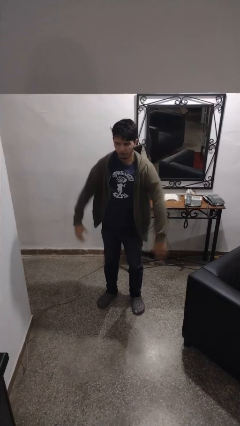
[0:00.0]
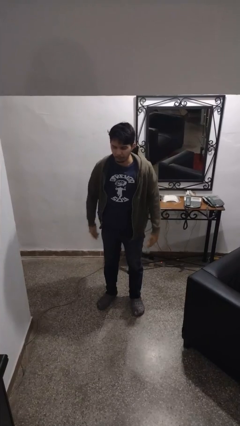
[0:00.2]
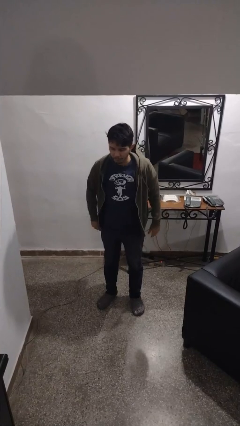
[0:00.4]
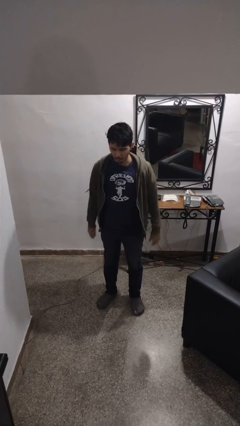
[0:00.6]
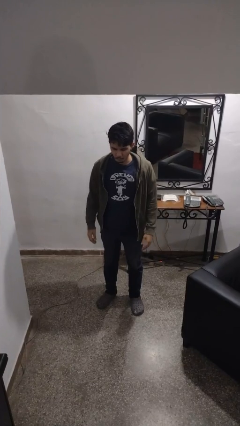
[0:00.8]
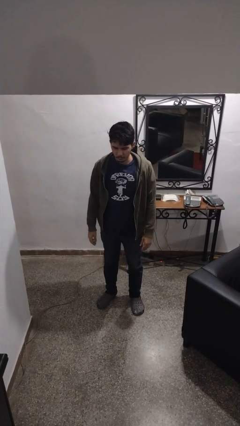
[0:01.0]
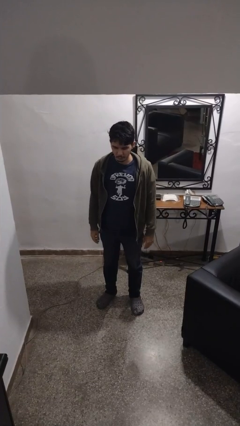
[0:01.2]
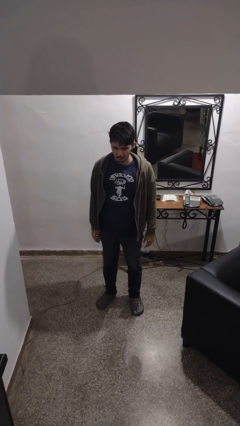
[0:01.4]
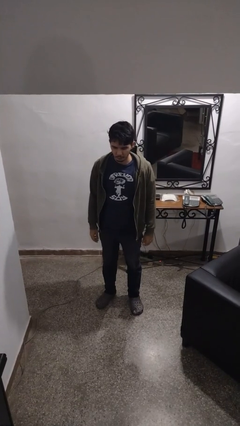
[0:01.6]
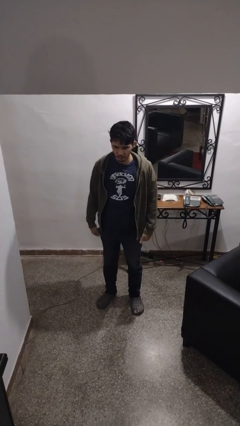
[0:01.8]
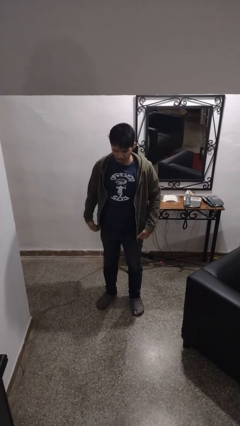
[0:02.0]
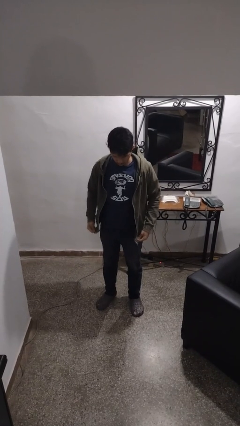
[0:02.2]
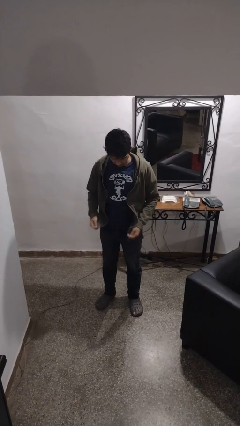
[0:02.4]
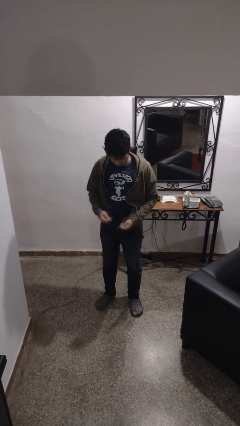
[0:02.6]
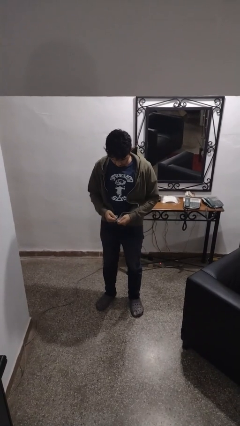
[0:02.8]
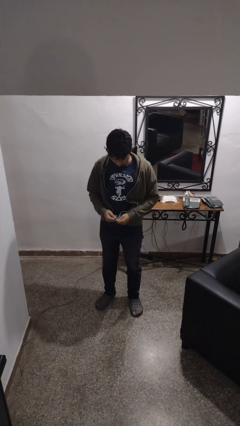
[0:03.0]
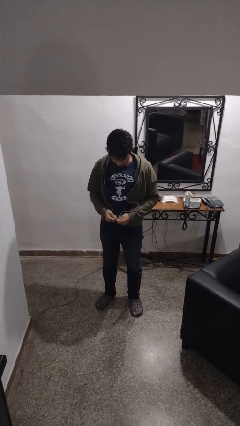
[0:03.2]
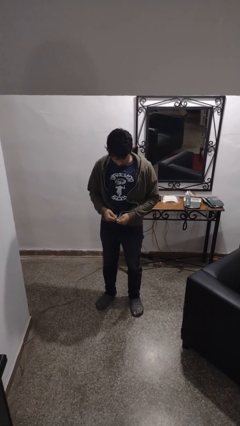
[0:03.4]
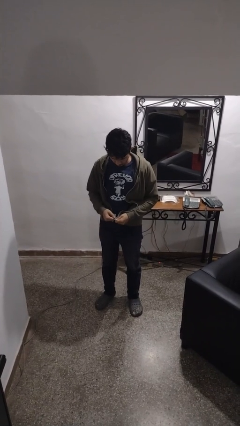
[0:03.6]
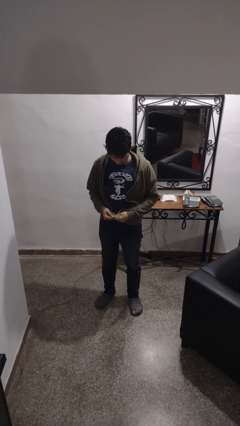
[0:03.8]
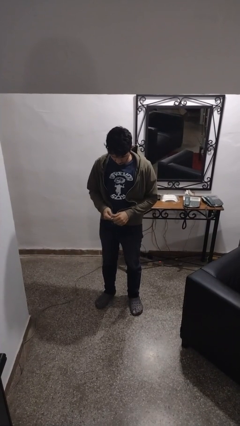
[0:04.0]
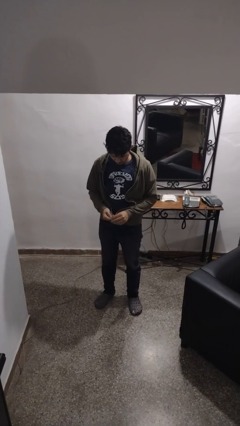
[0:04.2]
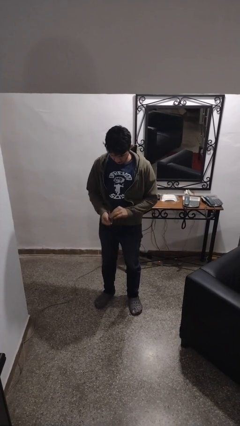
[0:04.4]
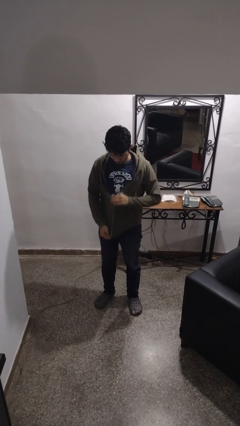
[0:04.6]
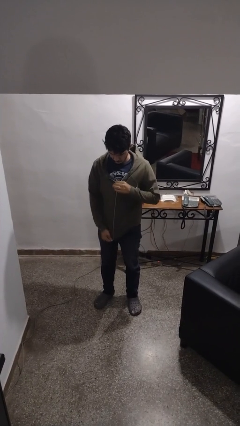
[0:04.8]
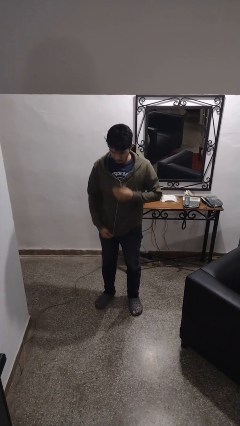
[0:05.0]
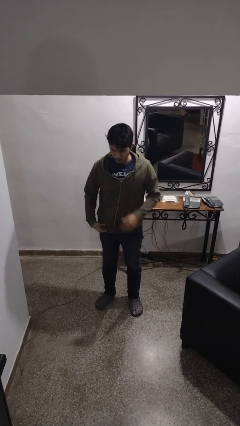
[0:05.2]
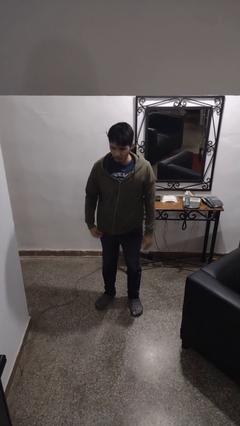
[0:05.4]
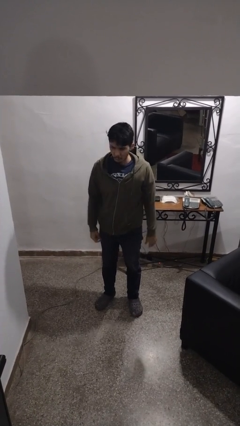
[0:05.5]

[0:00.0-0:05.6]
person zips up jacket

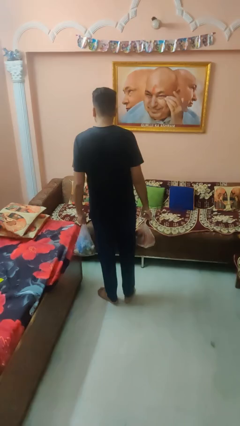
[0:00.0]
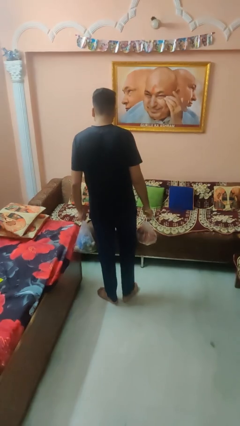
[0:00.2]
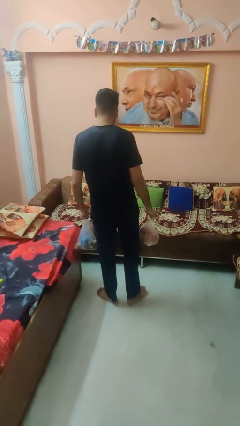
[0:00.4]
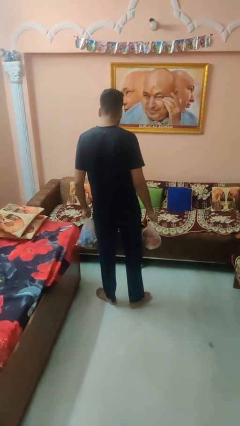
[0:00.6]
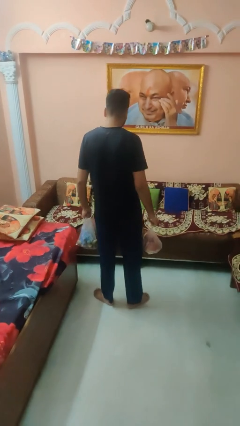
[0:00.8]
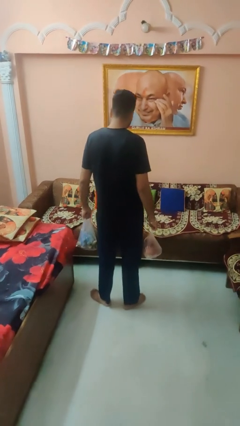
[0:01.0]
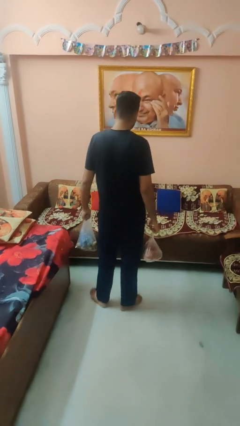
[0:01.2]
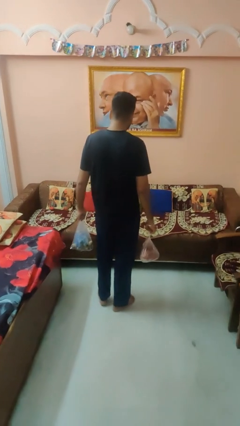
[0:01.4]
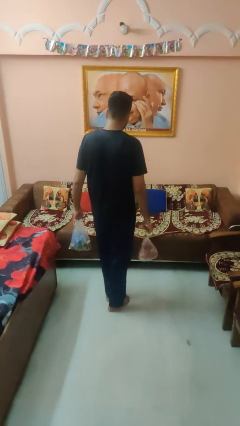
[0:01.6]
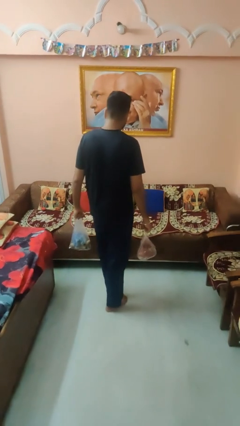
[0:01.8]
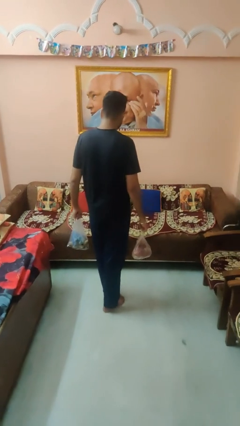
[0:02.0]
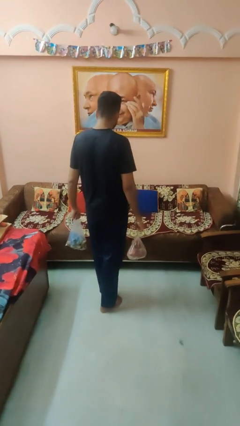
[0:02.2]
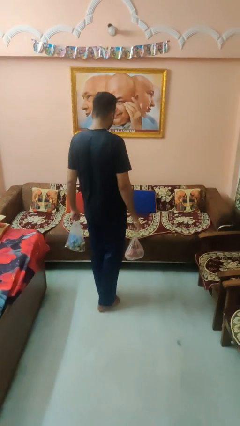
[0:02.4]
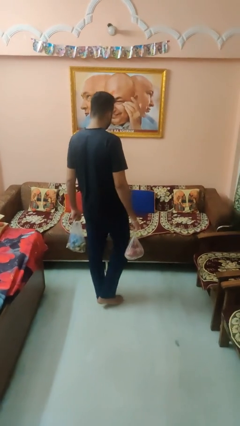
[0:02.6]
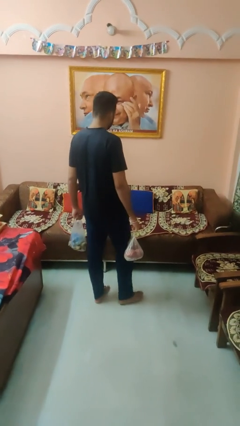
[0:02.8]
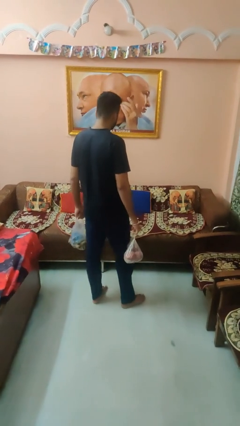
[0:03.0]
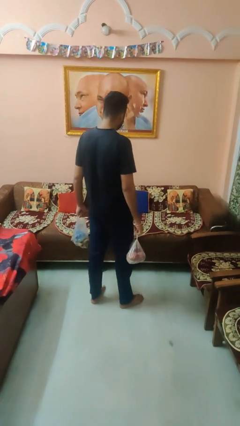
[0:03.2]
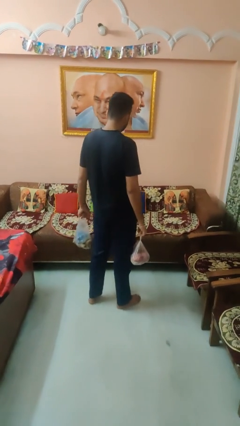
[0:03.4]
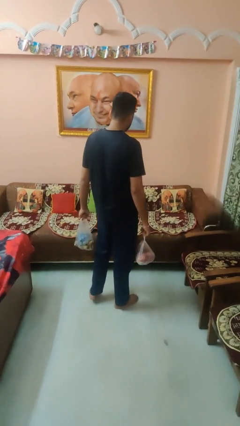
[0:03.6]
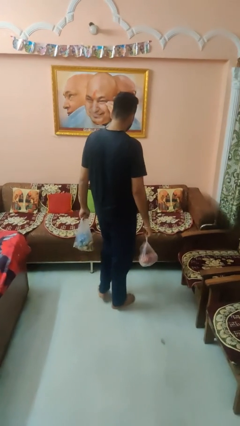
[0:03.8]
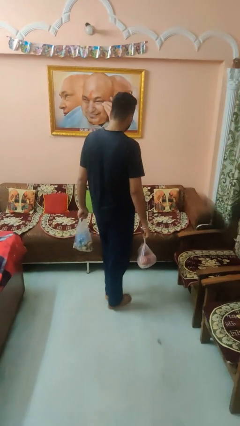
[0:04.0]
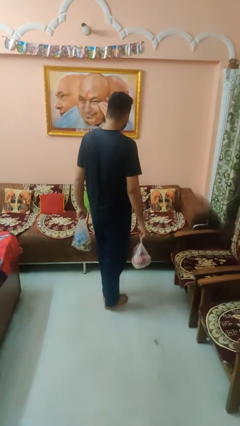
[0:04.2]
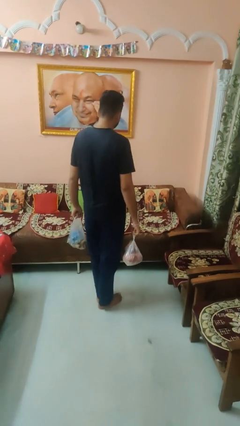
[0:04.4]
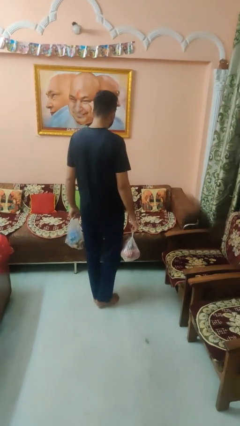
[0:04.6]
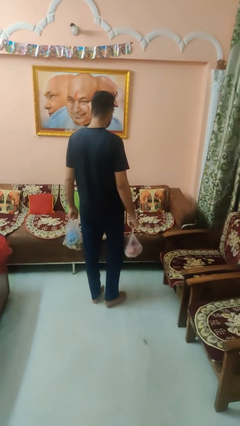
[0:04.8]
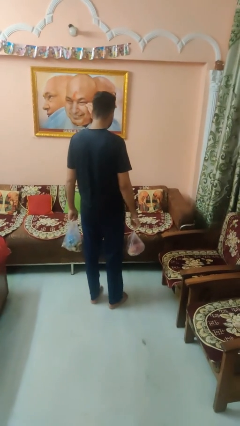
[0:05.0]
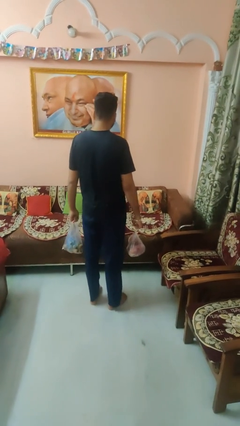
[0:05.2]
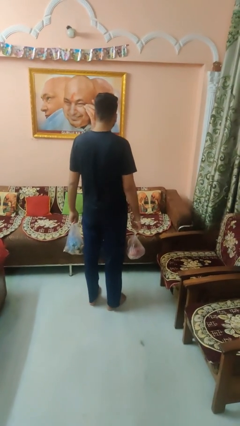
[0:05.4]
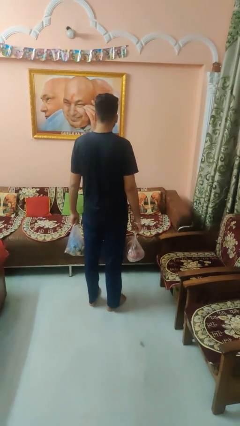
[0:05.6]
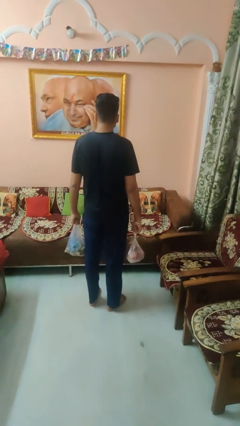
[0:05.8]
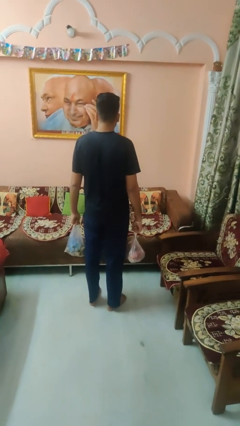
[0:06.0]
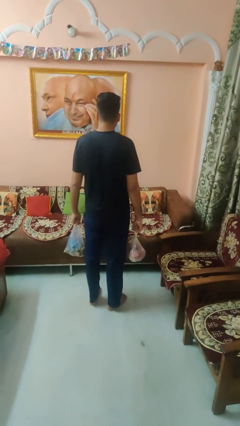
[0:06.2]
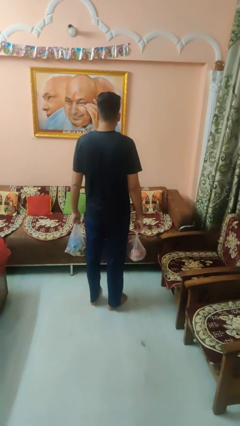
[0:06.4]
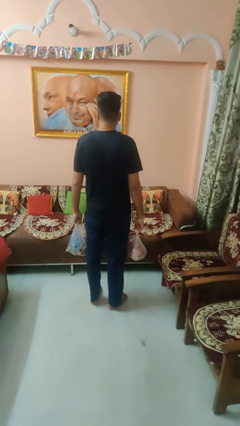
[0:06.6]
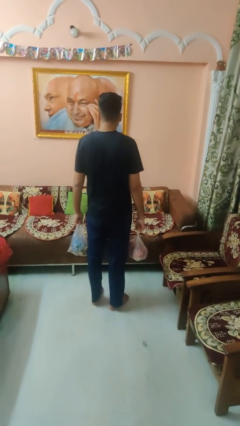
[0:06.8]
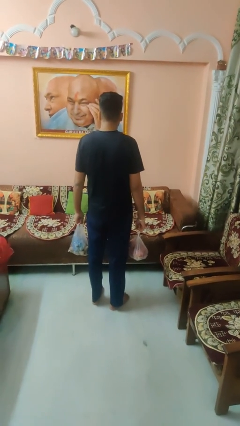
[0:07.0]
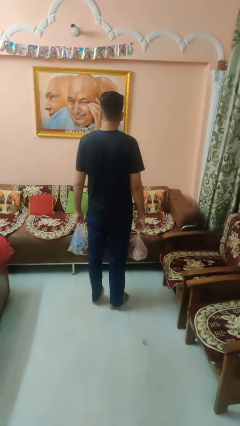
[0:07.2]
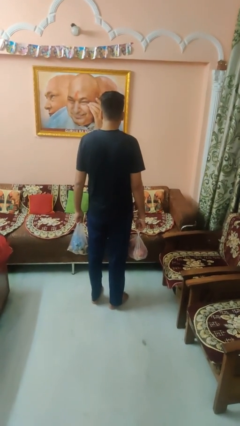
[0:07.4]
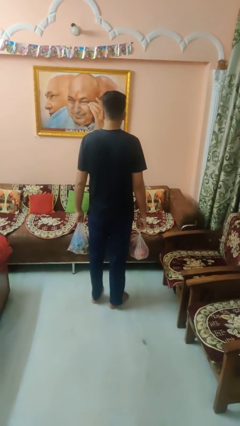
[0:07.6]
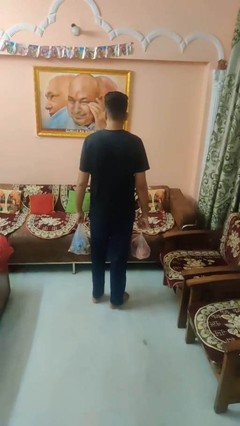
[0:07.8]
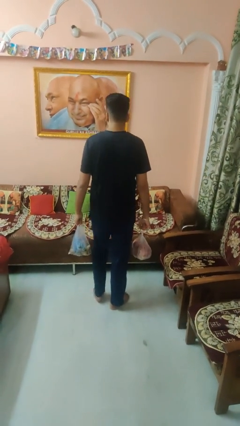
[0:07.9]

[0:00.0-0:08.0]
person carries groceries

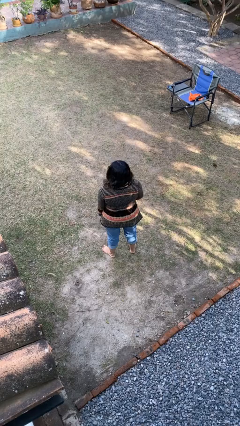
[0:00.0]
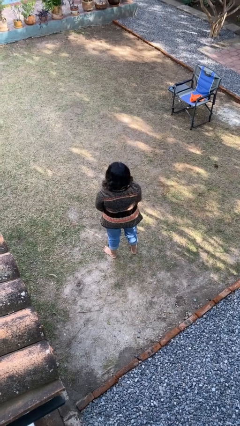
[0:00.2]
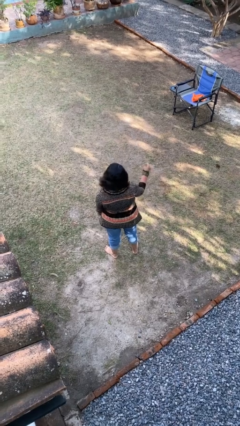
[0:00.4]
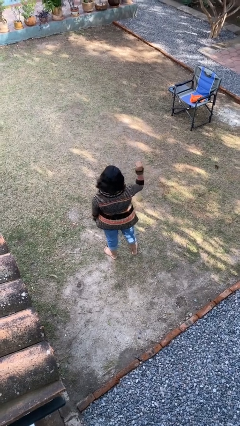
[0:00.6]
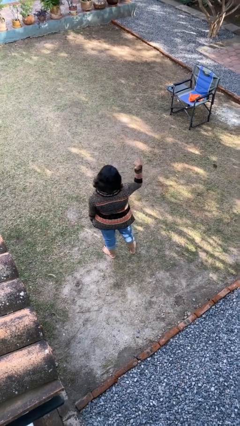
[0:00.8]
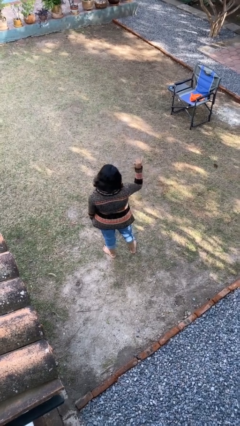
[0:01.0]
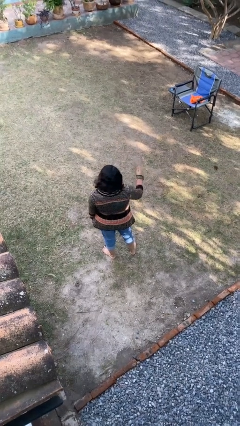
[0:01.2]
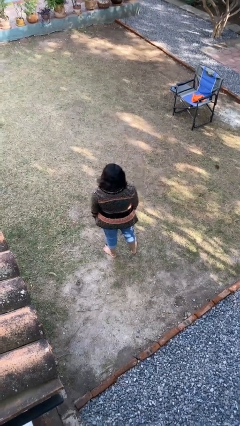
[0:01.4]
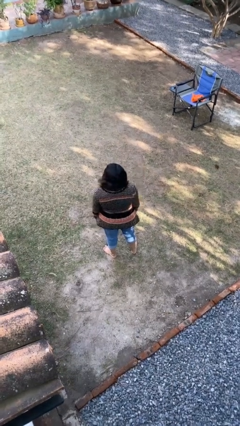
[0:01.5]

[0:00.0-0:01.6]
person gestures hang loose

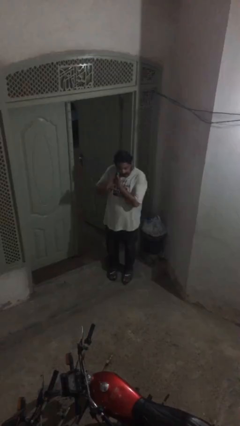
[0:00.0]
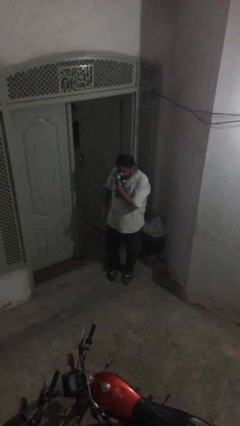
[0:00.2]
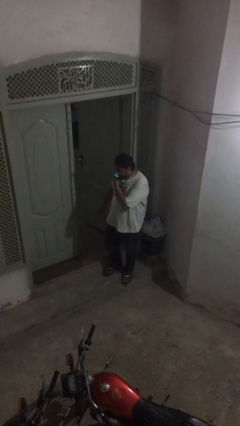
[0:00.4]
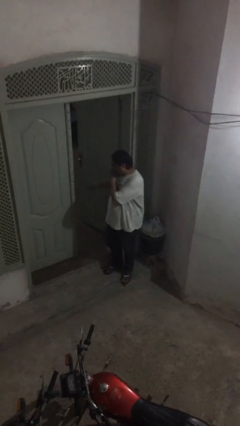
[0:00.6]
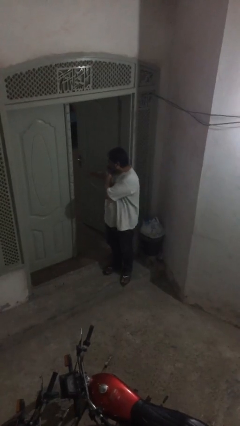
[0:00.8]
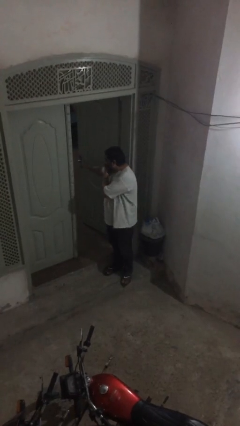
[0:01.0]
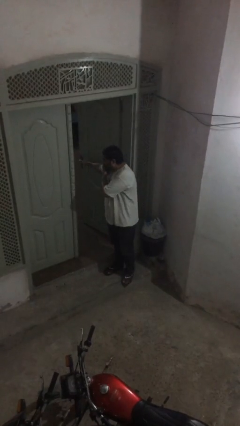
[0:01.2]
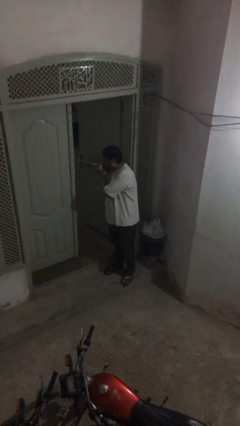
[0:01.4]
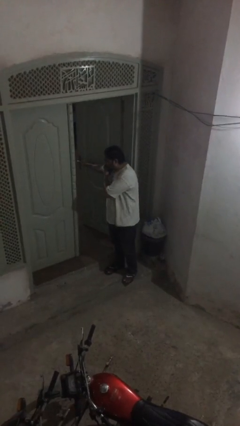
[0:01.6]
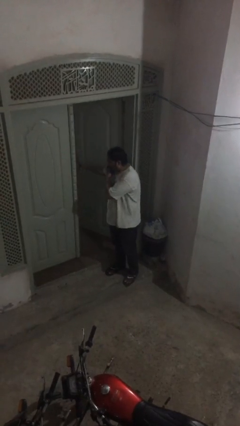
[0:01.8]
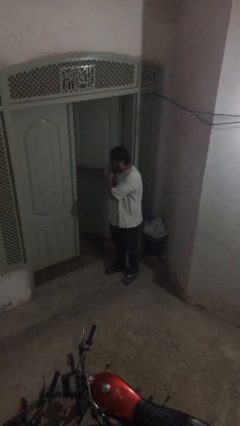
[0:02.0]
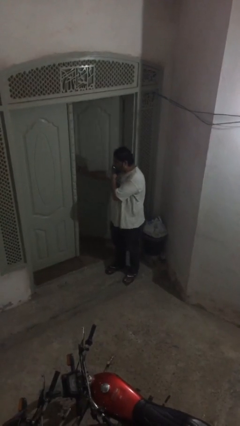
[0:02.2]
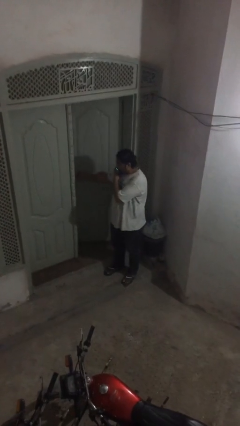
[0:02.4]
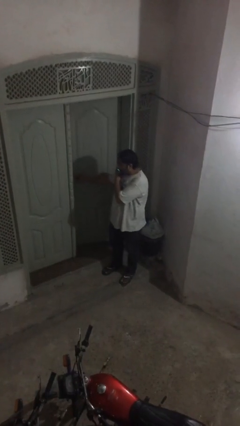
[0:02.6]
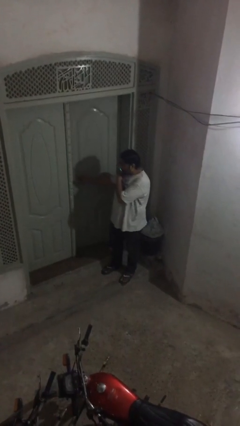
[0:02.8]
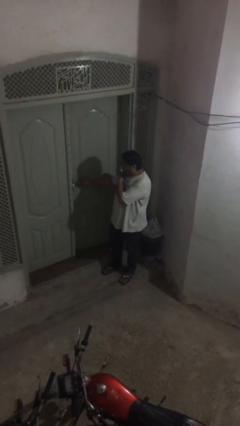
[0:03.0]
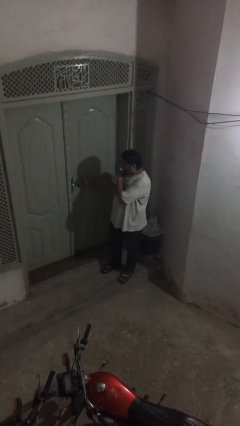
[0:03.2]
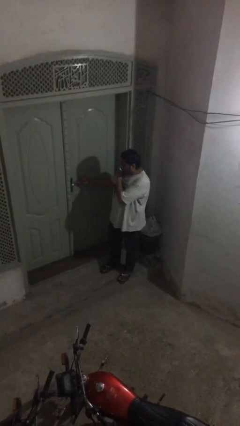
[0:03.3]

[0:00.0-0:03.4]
person closes facility door
